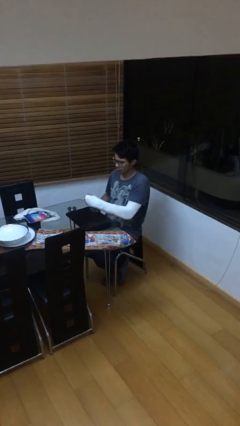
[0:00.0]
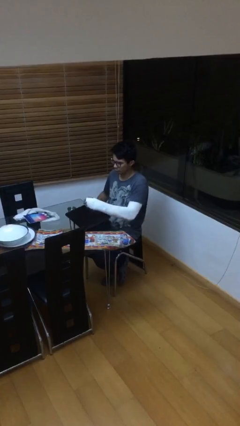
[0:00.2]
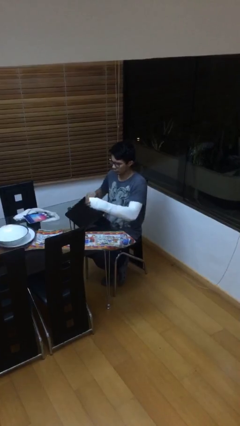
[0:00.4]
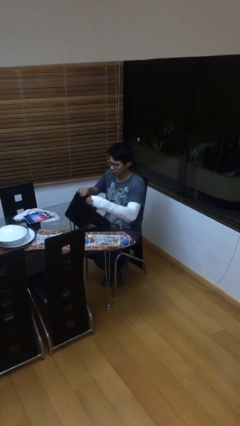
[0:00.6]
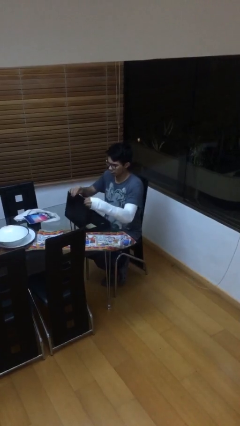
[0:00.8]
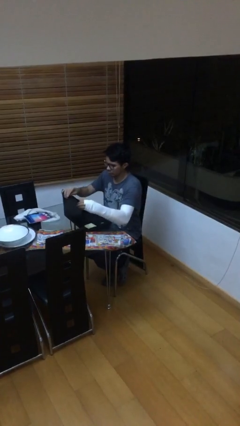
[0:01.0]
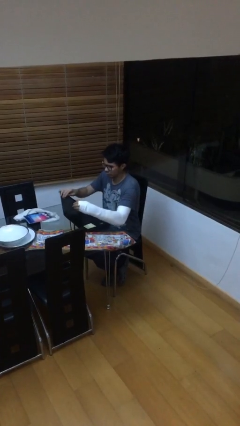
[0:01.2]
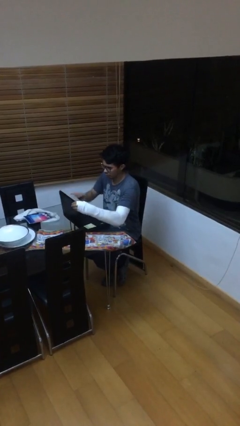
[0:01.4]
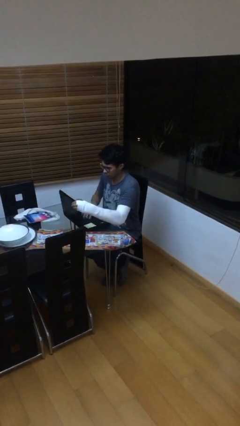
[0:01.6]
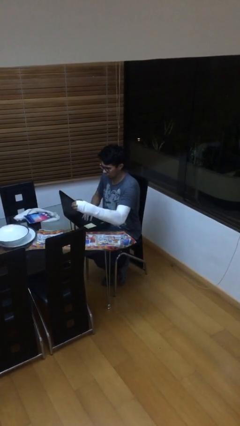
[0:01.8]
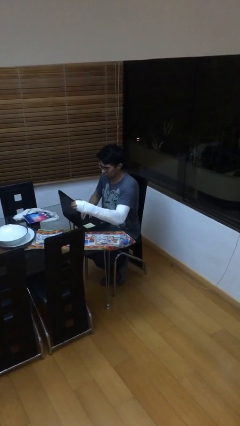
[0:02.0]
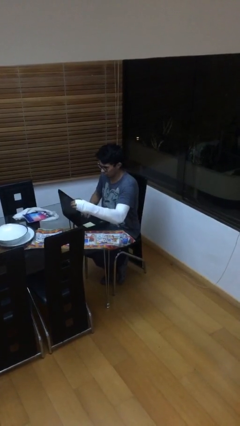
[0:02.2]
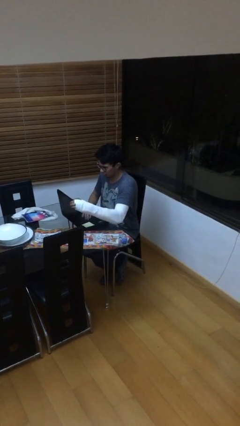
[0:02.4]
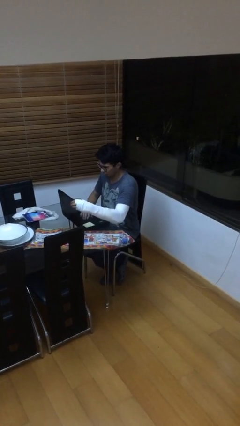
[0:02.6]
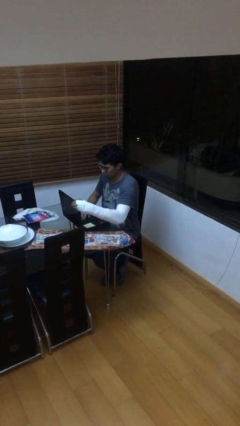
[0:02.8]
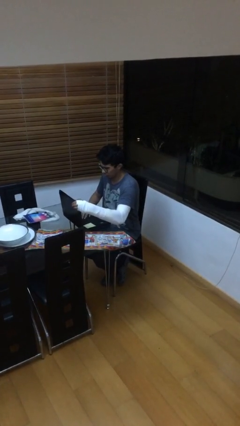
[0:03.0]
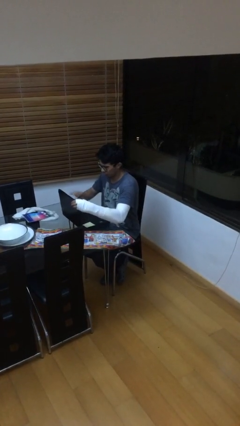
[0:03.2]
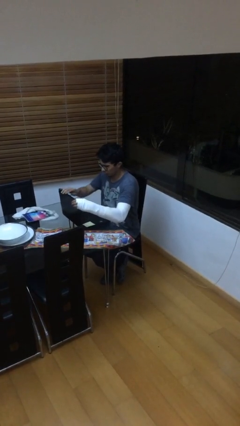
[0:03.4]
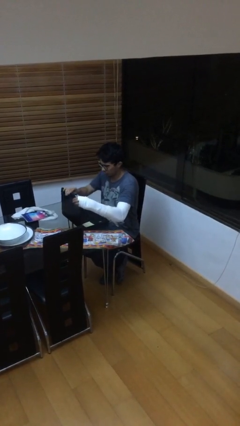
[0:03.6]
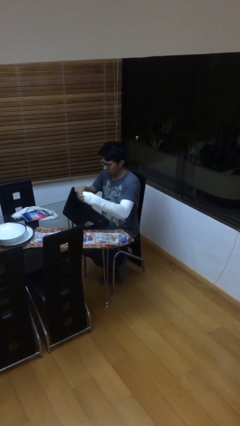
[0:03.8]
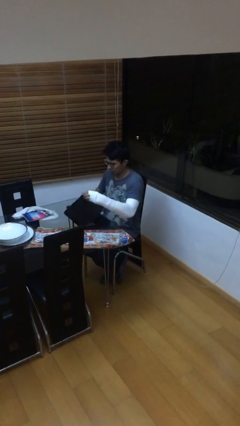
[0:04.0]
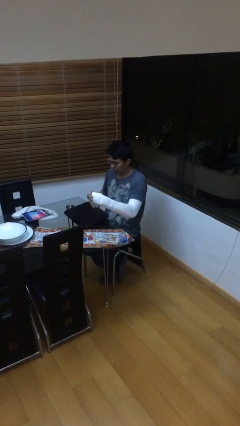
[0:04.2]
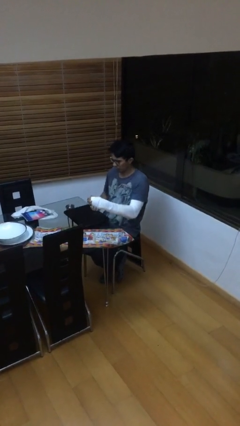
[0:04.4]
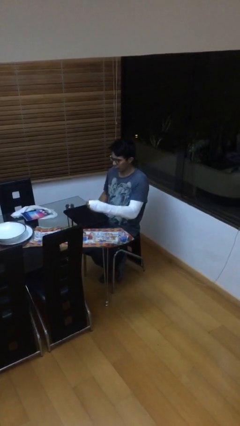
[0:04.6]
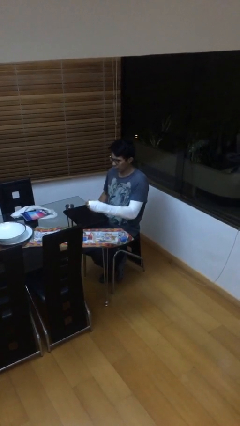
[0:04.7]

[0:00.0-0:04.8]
person interacts with laptop

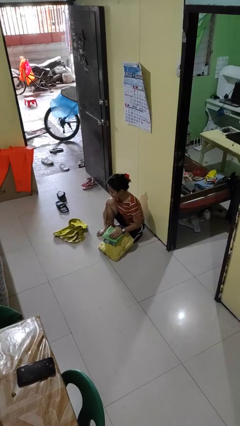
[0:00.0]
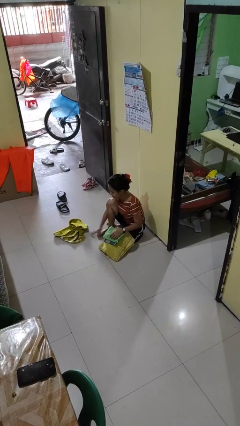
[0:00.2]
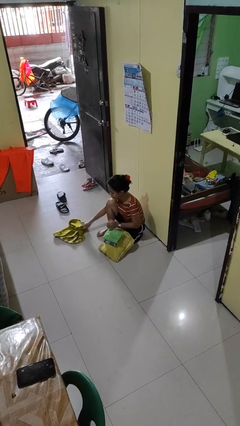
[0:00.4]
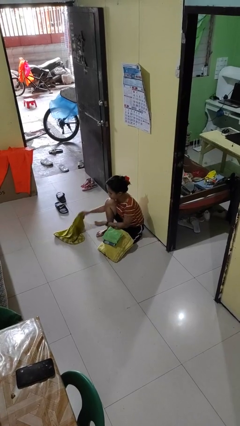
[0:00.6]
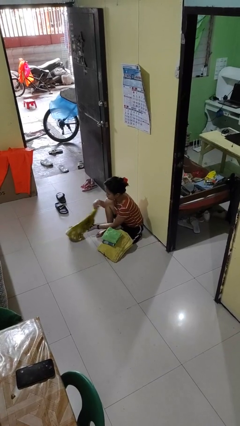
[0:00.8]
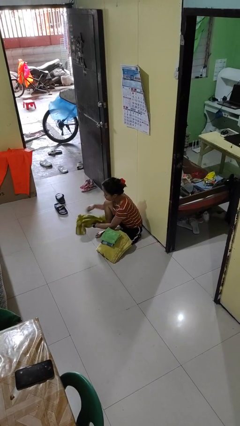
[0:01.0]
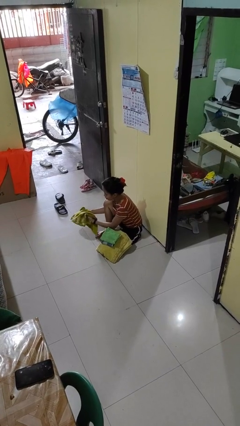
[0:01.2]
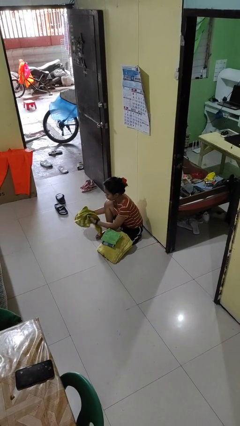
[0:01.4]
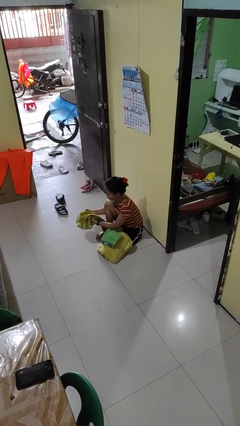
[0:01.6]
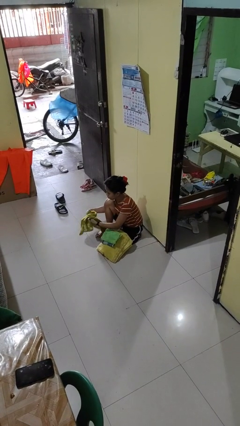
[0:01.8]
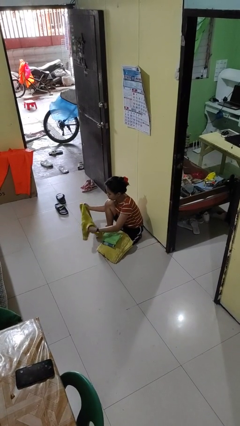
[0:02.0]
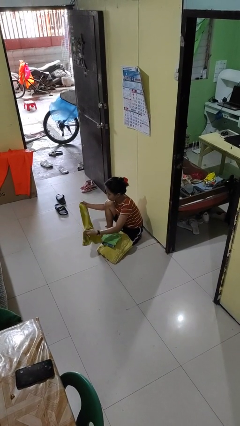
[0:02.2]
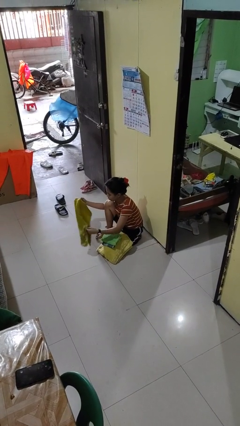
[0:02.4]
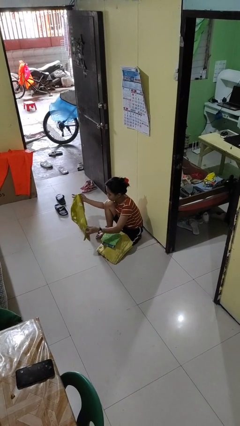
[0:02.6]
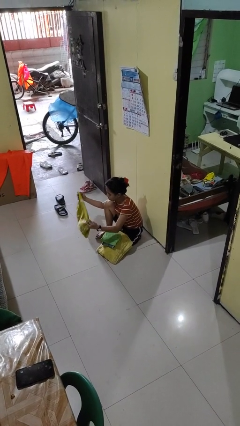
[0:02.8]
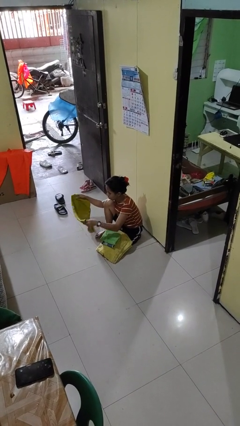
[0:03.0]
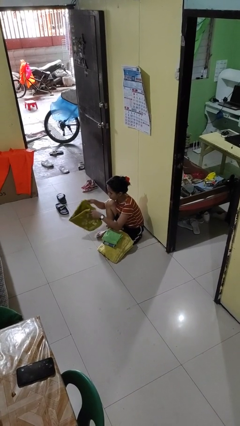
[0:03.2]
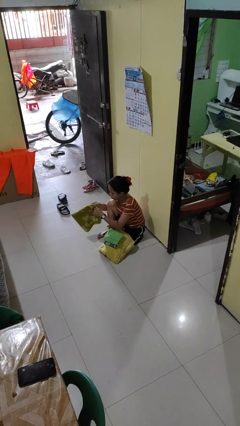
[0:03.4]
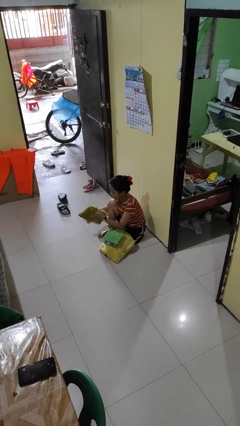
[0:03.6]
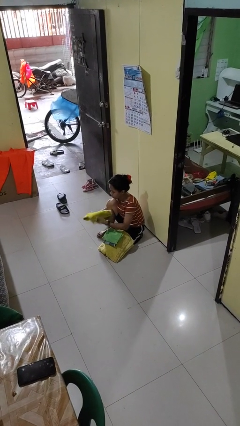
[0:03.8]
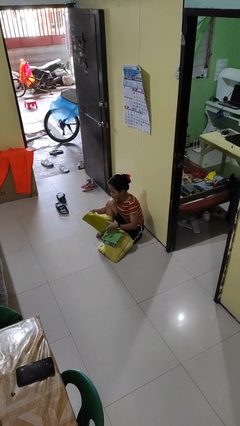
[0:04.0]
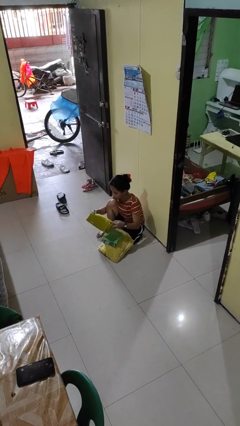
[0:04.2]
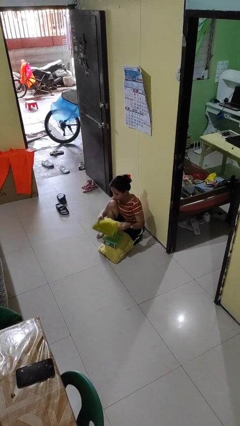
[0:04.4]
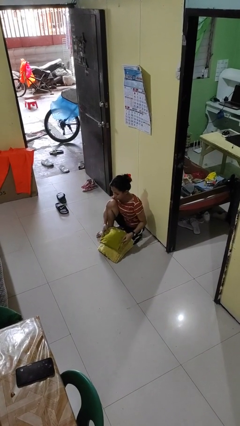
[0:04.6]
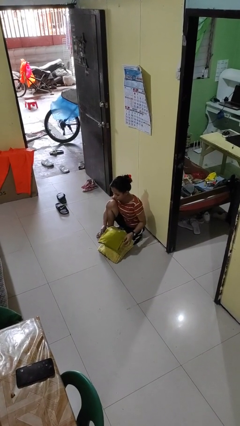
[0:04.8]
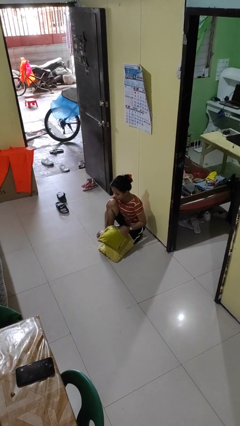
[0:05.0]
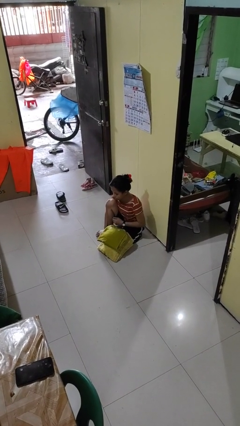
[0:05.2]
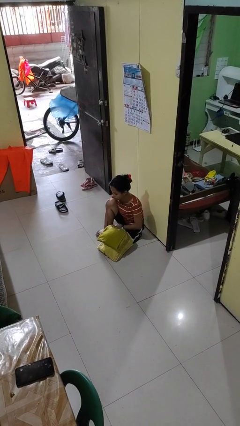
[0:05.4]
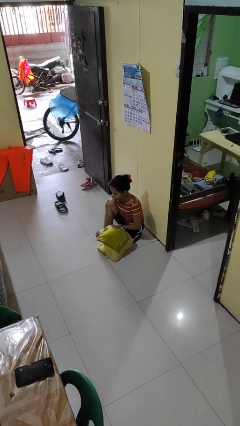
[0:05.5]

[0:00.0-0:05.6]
person folds towel

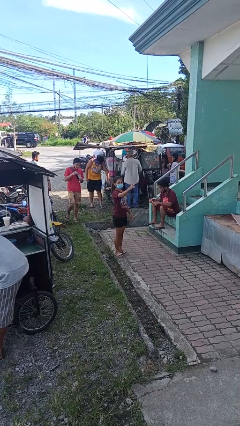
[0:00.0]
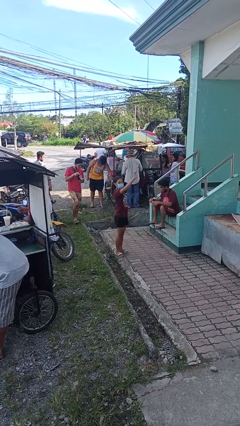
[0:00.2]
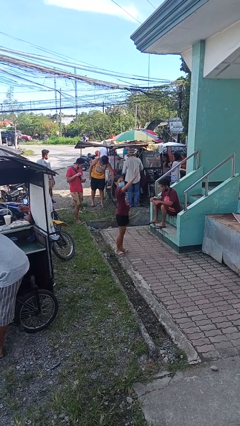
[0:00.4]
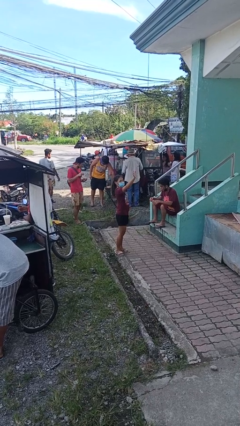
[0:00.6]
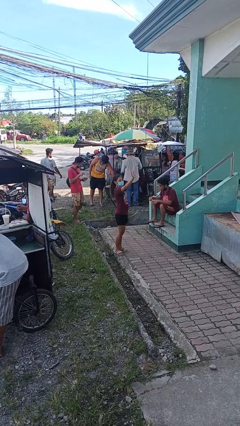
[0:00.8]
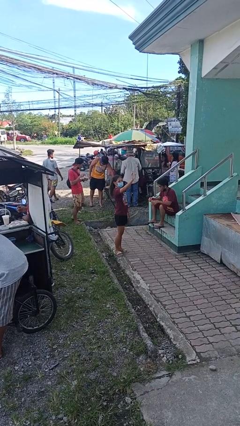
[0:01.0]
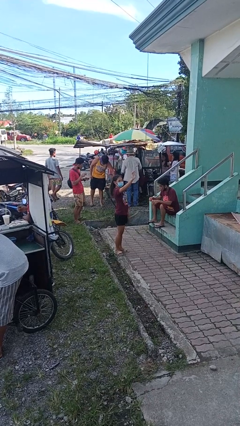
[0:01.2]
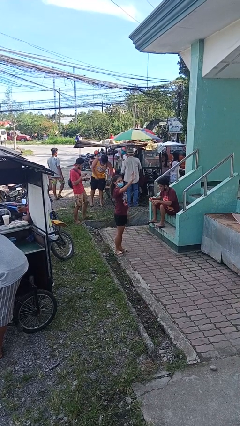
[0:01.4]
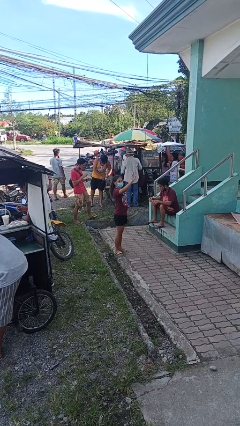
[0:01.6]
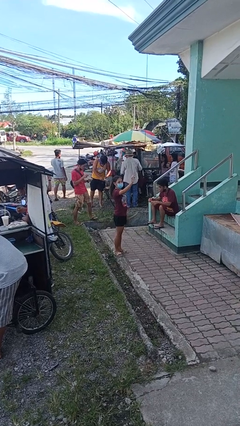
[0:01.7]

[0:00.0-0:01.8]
person waves at person

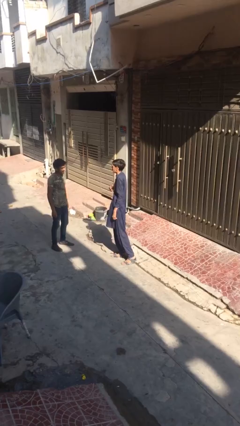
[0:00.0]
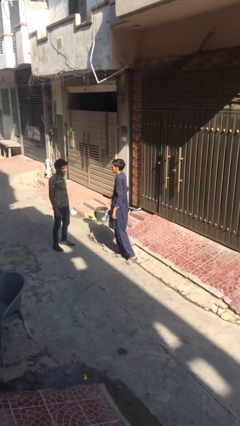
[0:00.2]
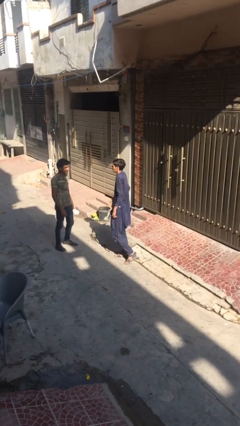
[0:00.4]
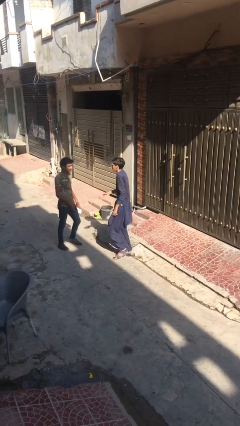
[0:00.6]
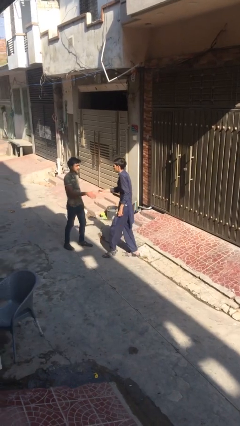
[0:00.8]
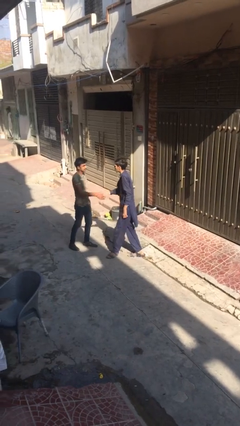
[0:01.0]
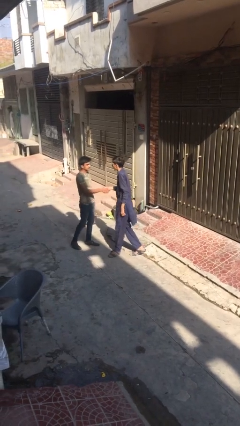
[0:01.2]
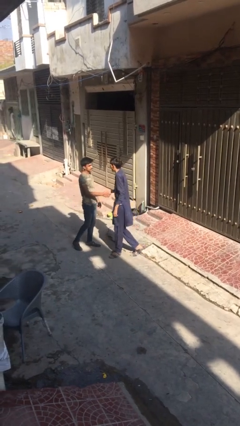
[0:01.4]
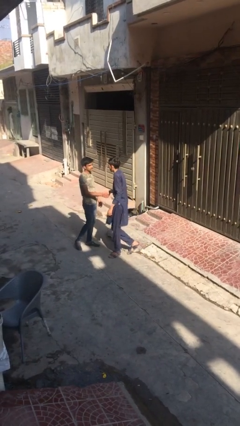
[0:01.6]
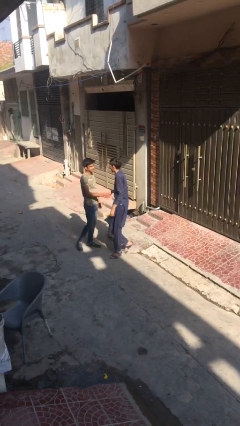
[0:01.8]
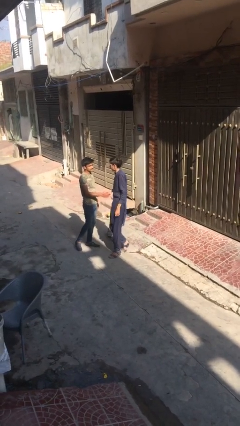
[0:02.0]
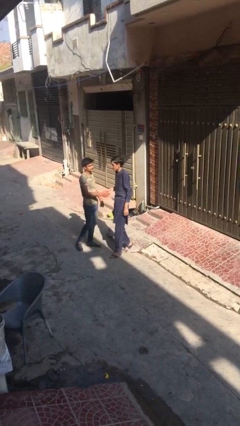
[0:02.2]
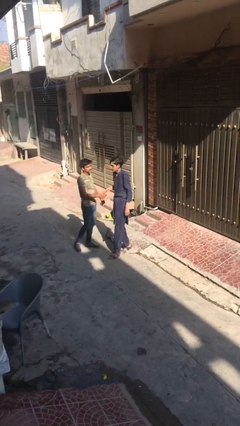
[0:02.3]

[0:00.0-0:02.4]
person shakes hand

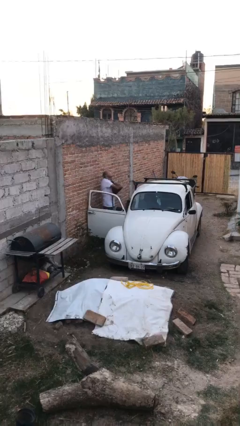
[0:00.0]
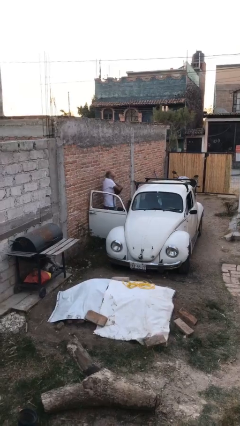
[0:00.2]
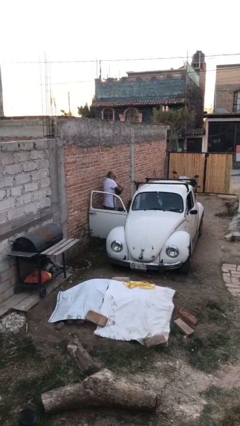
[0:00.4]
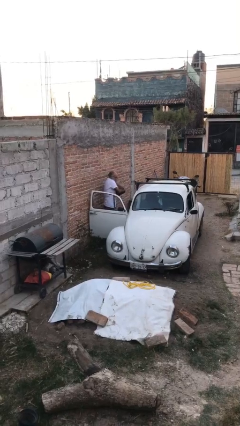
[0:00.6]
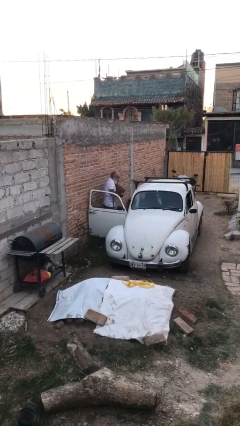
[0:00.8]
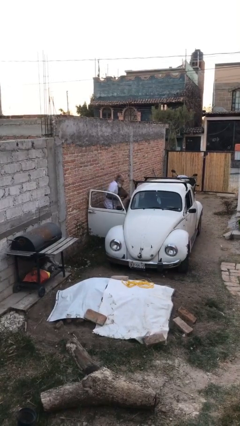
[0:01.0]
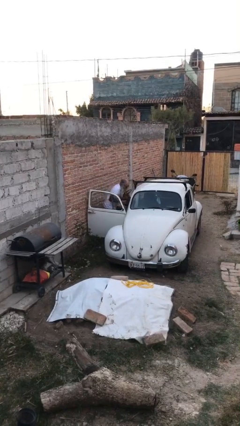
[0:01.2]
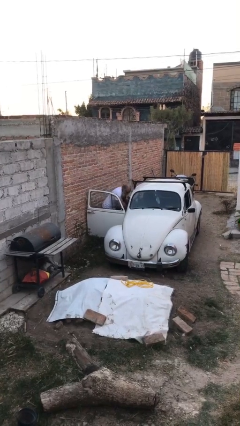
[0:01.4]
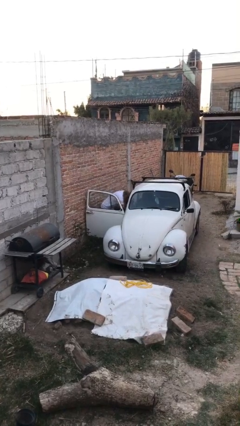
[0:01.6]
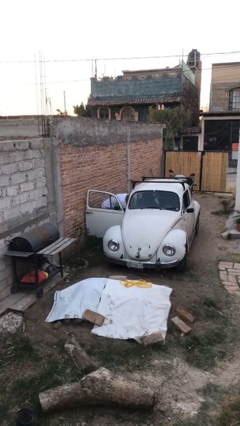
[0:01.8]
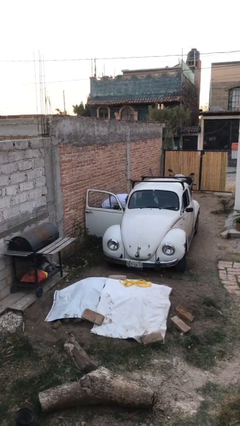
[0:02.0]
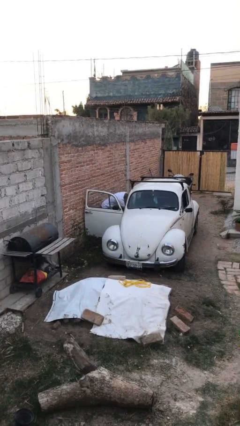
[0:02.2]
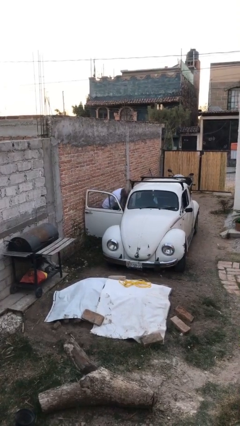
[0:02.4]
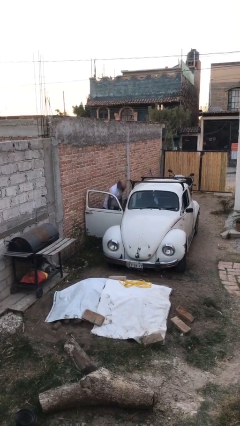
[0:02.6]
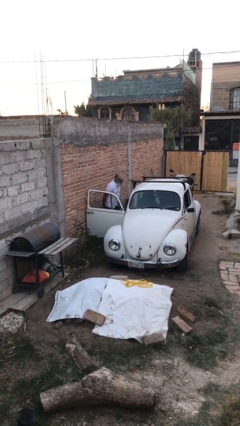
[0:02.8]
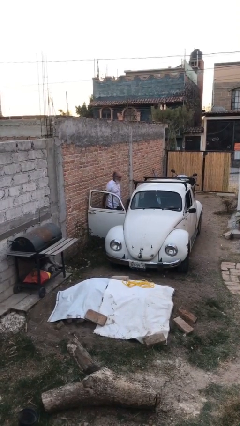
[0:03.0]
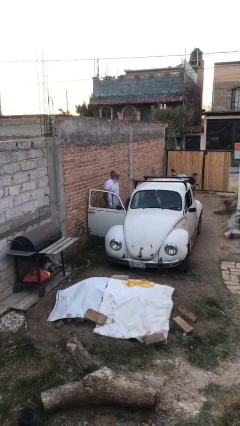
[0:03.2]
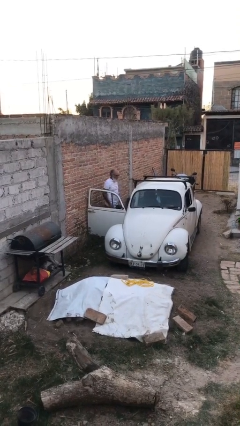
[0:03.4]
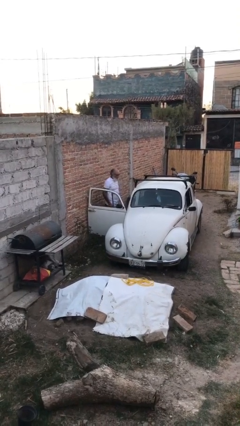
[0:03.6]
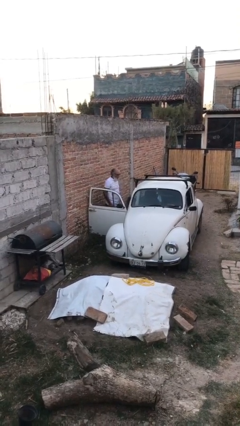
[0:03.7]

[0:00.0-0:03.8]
person loads car
